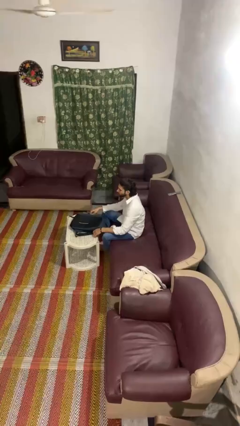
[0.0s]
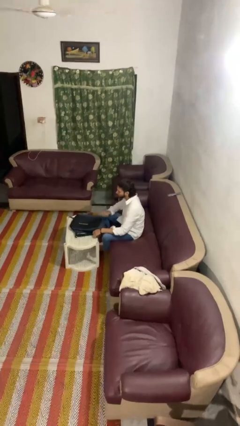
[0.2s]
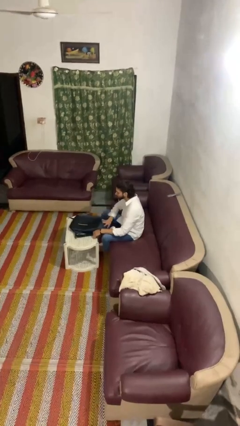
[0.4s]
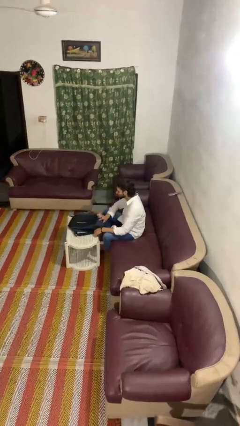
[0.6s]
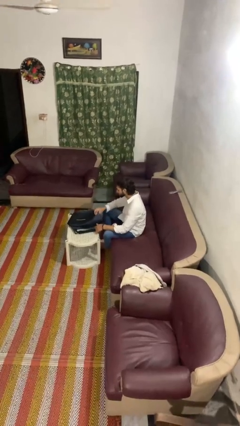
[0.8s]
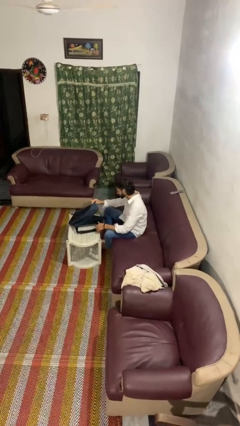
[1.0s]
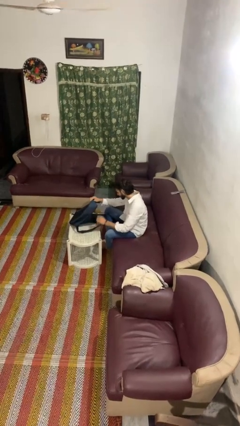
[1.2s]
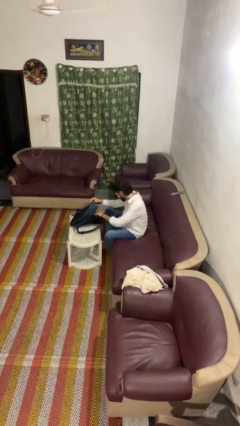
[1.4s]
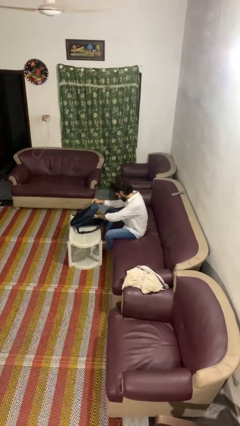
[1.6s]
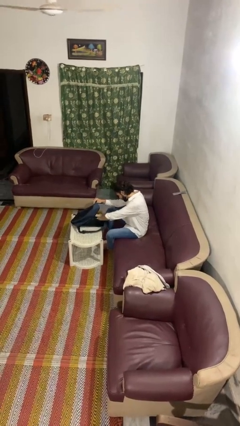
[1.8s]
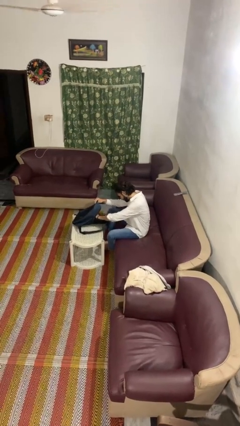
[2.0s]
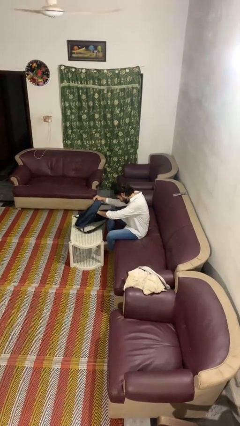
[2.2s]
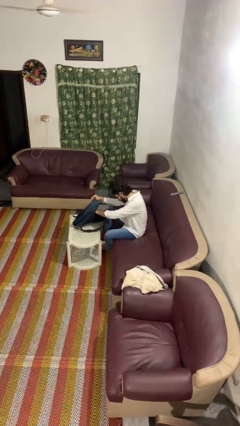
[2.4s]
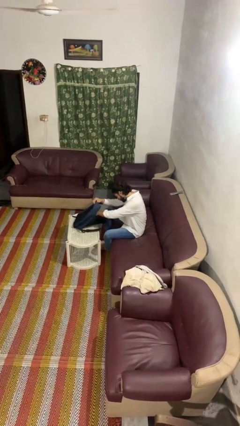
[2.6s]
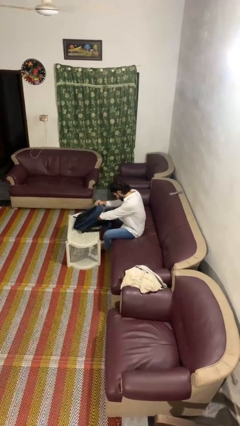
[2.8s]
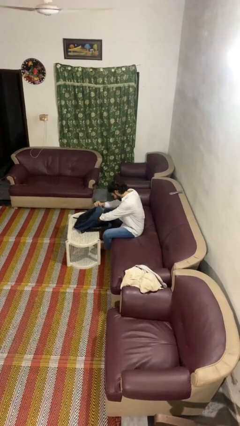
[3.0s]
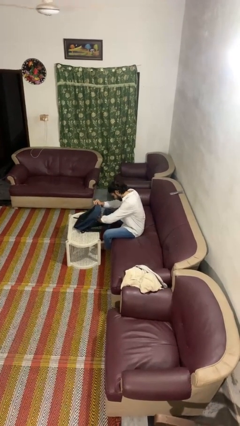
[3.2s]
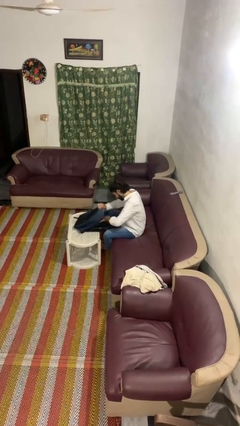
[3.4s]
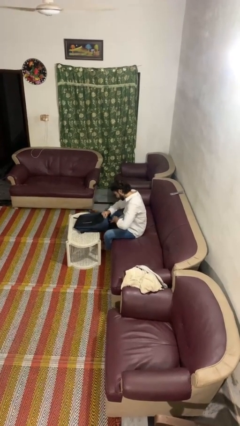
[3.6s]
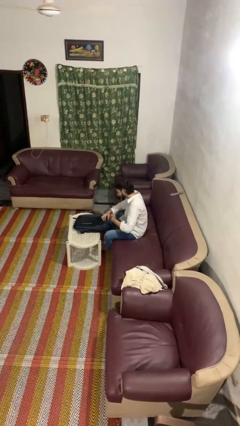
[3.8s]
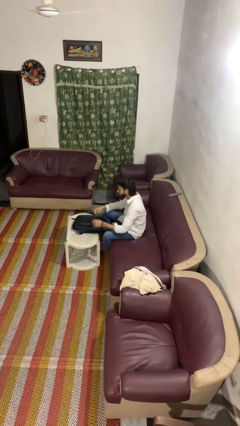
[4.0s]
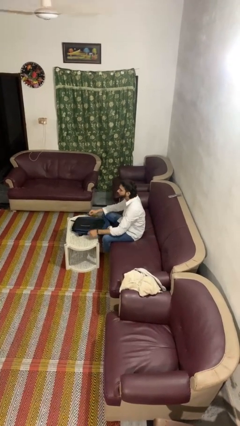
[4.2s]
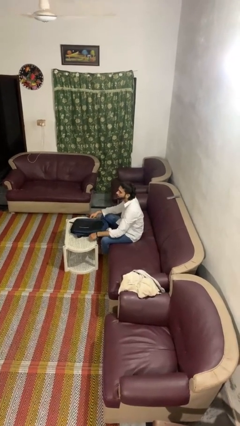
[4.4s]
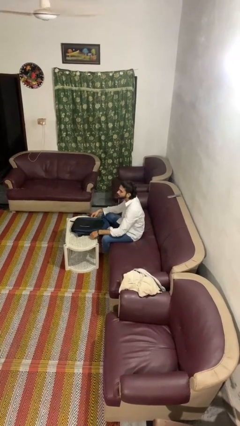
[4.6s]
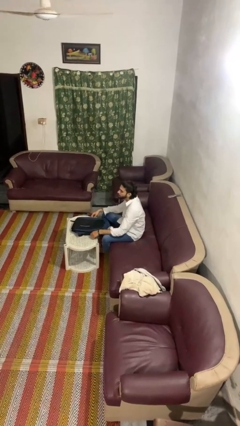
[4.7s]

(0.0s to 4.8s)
person searches in bag

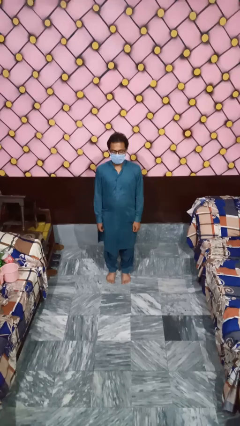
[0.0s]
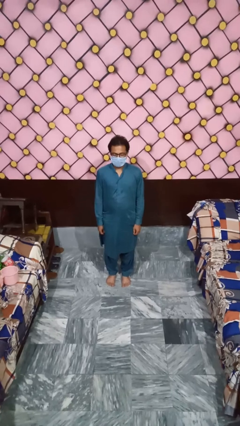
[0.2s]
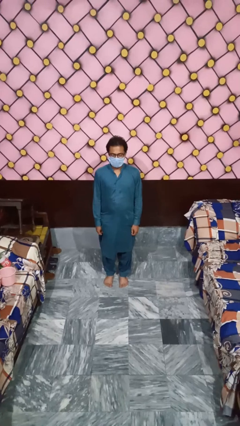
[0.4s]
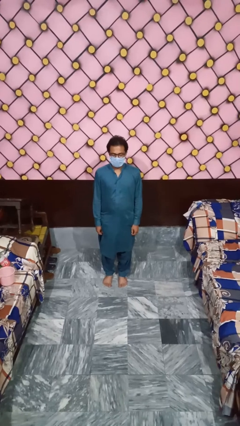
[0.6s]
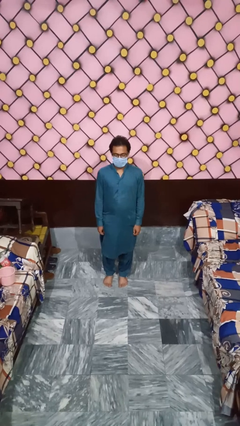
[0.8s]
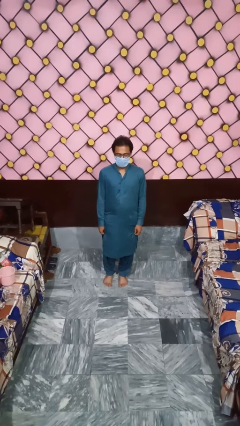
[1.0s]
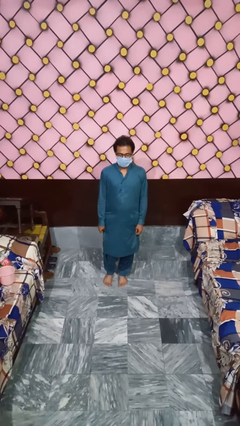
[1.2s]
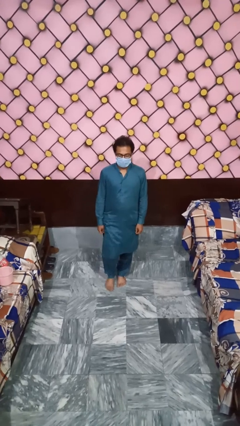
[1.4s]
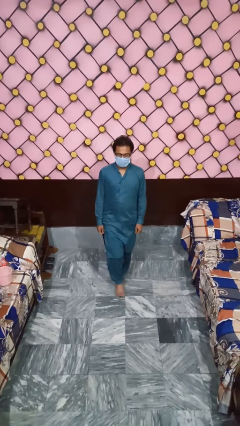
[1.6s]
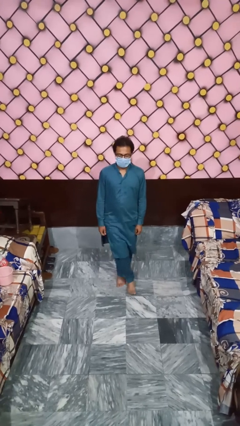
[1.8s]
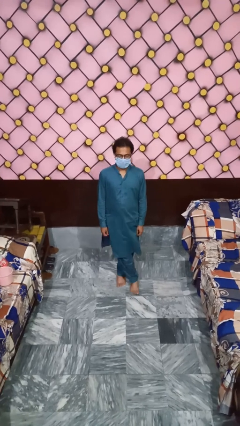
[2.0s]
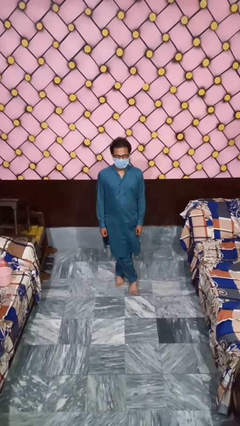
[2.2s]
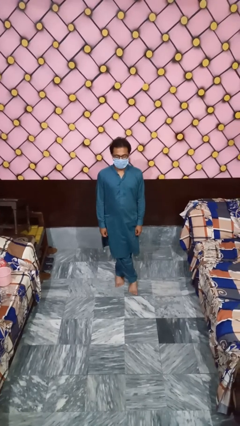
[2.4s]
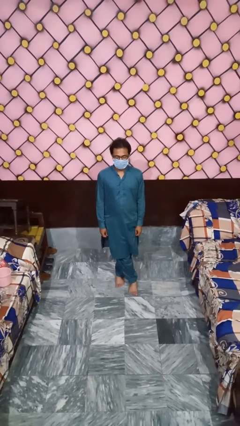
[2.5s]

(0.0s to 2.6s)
person crosses legs

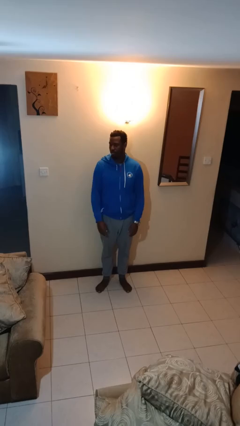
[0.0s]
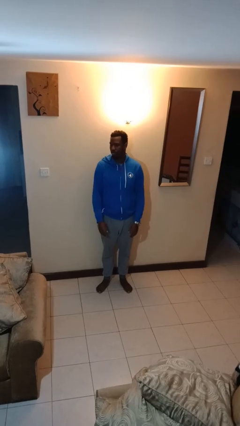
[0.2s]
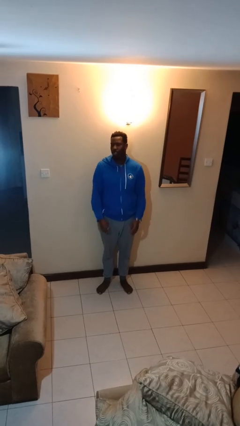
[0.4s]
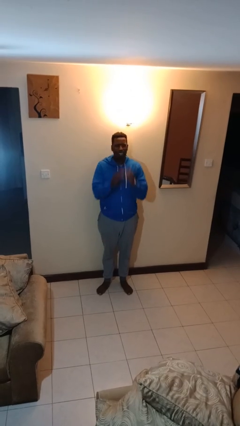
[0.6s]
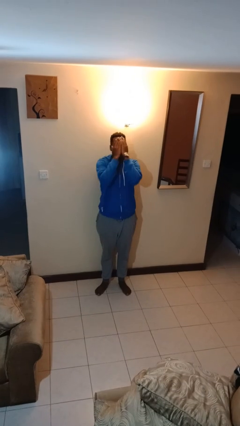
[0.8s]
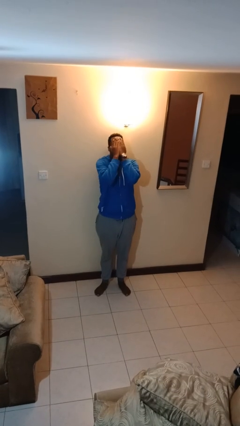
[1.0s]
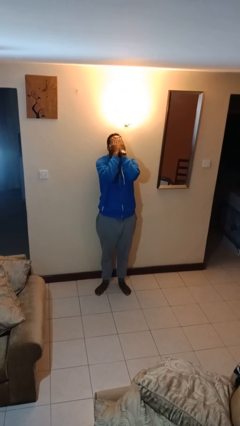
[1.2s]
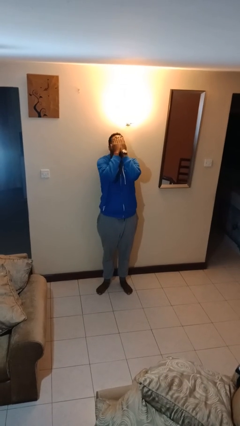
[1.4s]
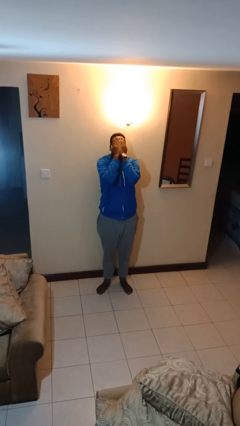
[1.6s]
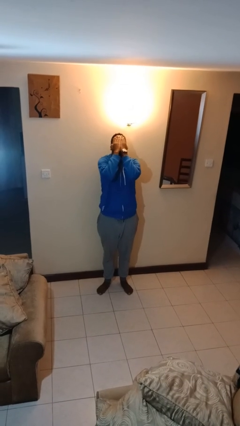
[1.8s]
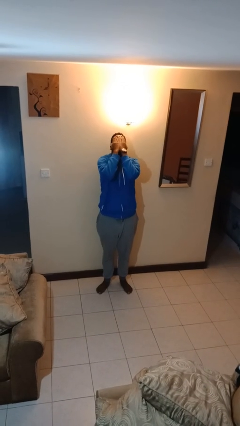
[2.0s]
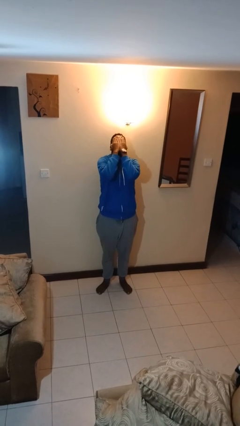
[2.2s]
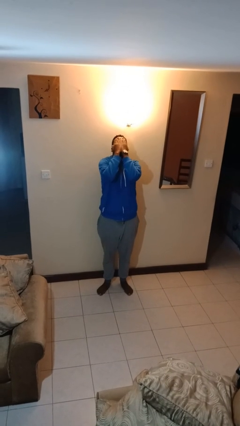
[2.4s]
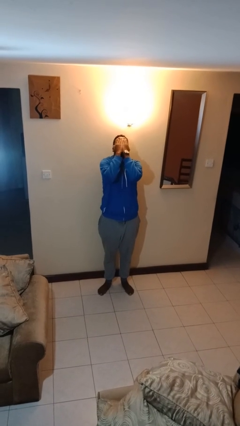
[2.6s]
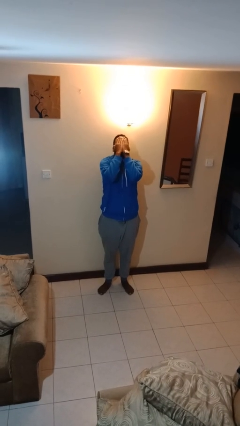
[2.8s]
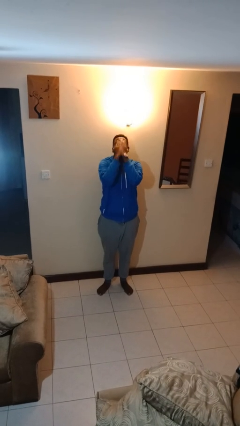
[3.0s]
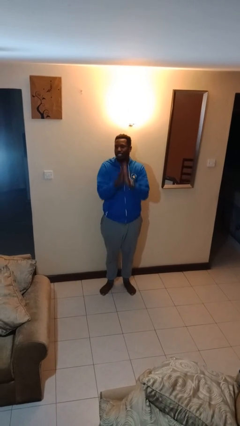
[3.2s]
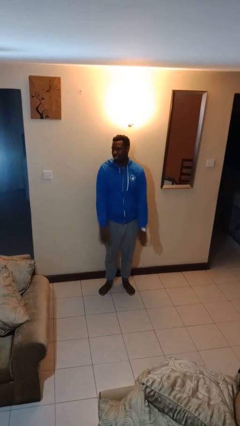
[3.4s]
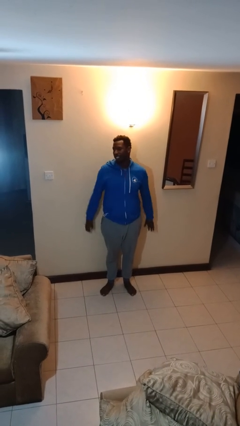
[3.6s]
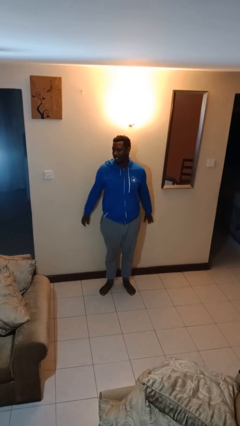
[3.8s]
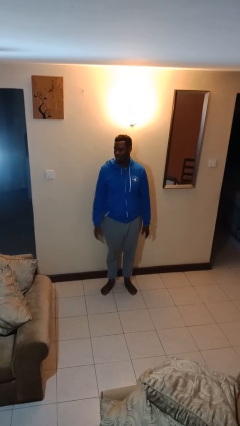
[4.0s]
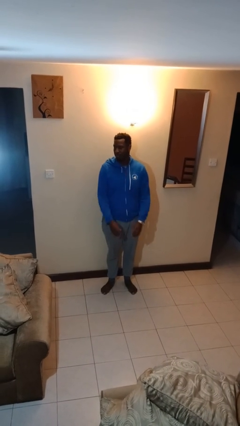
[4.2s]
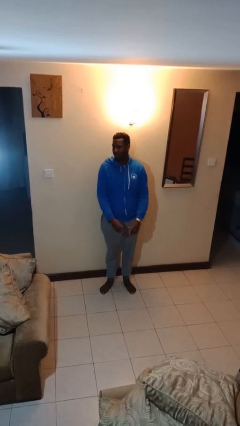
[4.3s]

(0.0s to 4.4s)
person covers face with hands

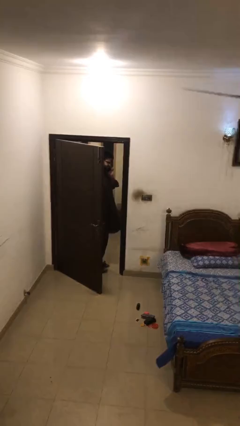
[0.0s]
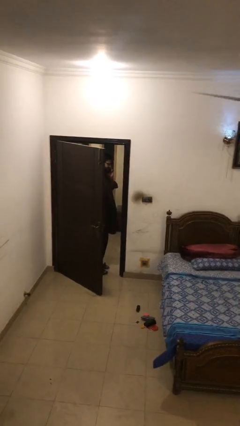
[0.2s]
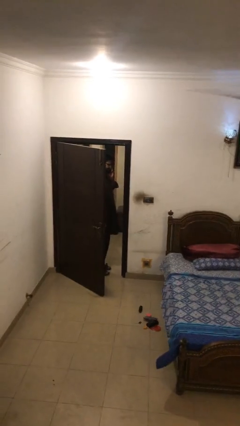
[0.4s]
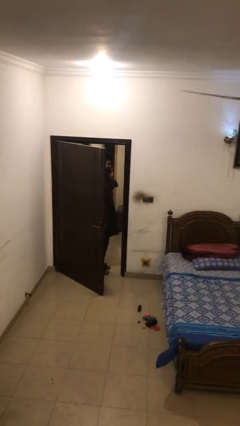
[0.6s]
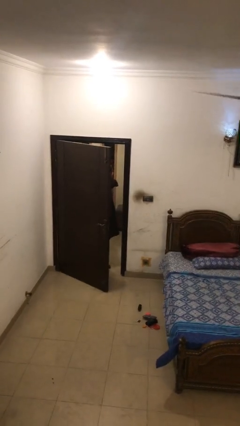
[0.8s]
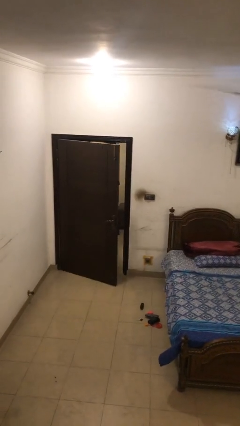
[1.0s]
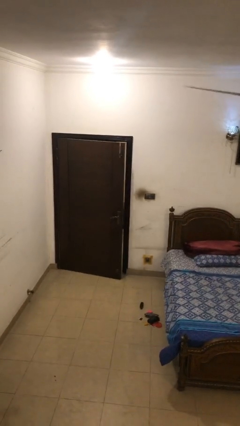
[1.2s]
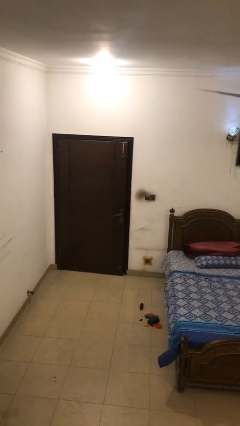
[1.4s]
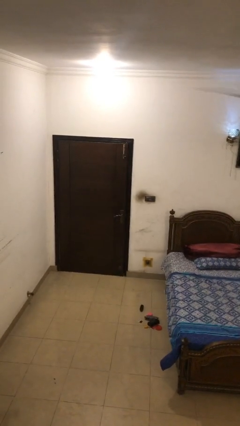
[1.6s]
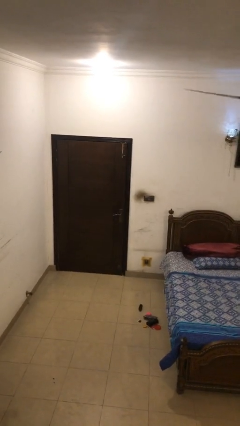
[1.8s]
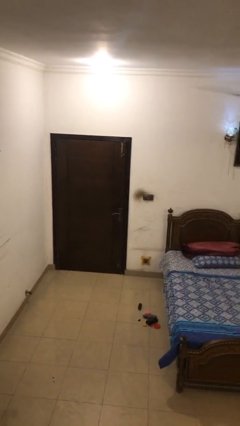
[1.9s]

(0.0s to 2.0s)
person closes facility door

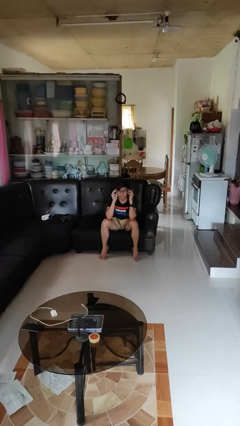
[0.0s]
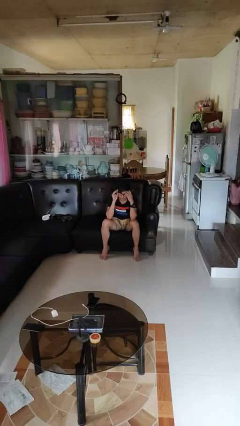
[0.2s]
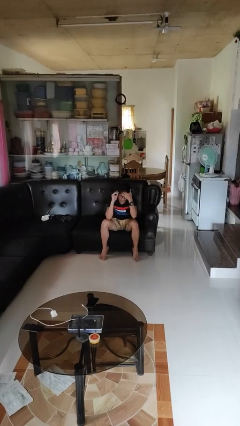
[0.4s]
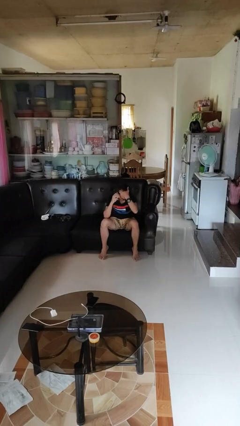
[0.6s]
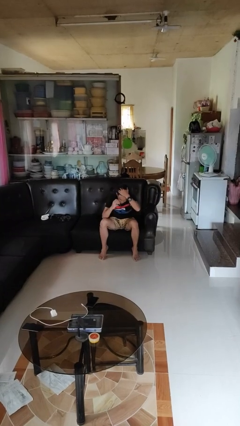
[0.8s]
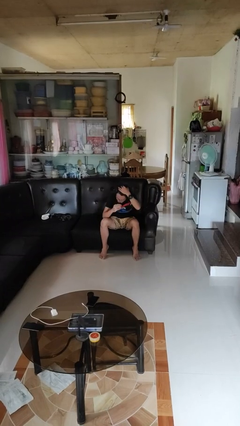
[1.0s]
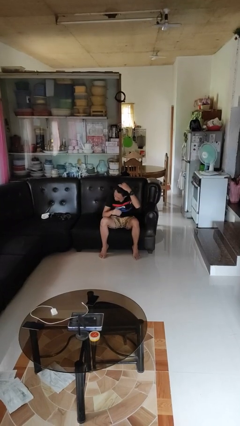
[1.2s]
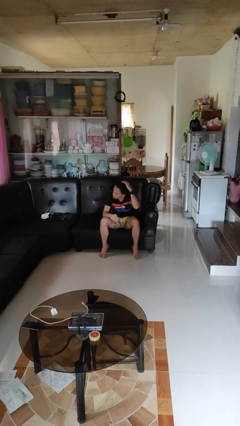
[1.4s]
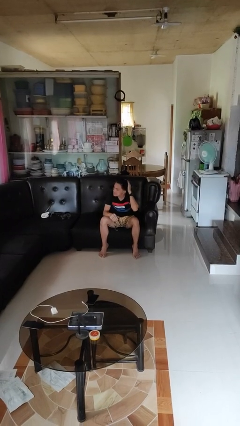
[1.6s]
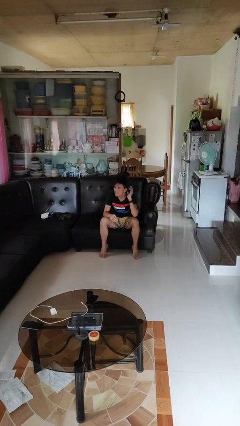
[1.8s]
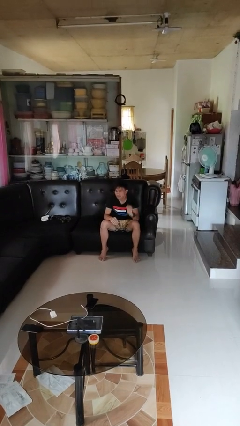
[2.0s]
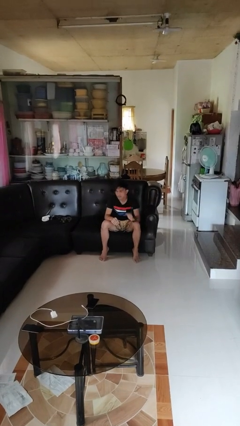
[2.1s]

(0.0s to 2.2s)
person takes off glasses

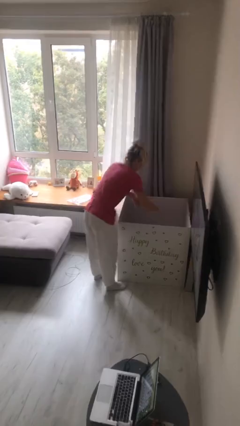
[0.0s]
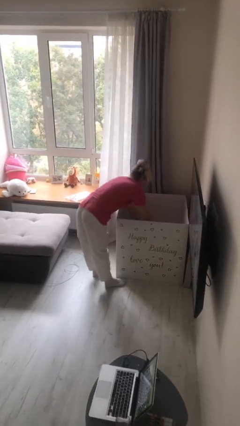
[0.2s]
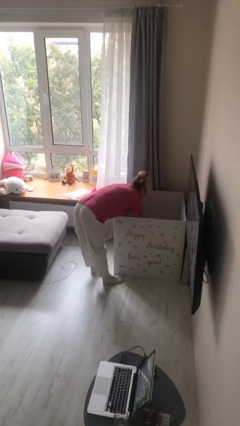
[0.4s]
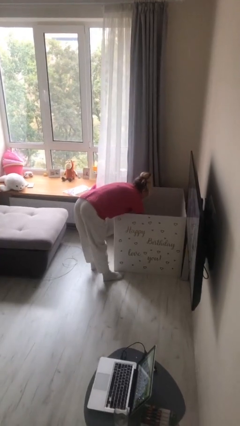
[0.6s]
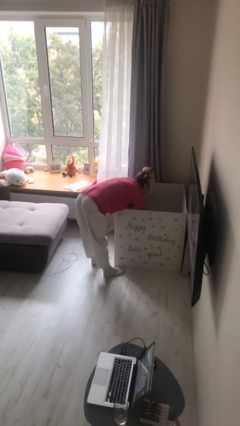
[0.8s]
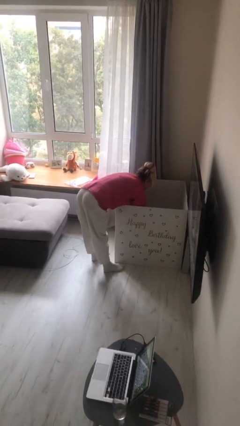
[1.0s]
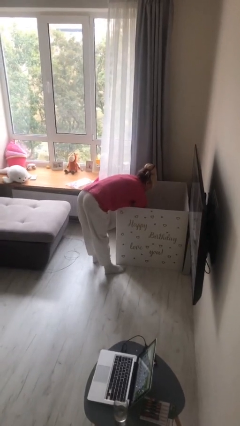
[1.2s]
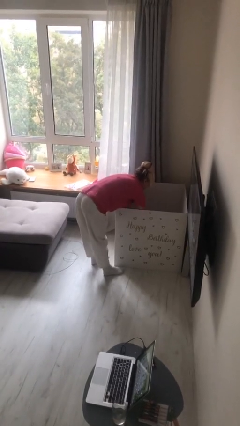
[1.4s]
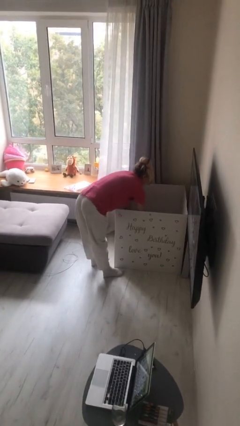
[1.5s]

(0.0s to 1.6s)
person searches in box
